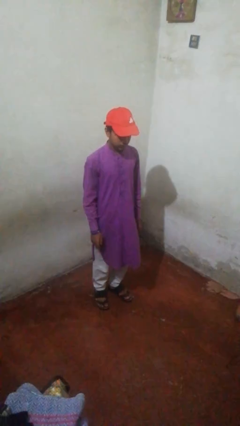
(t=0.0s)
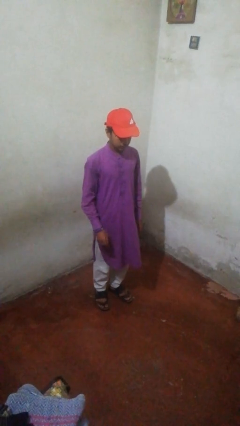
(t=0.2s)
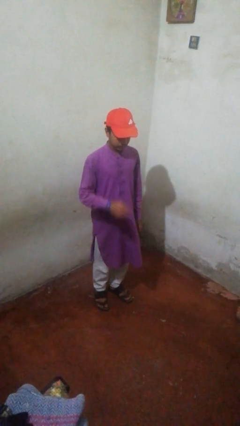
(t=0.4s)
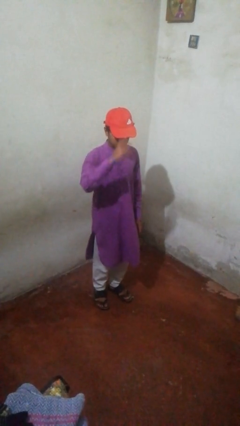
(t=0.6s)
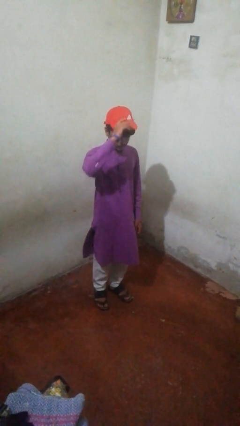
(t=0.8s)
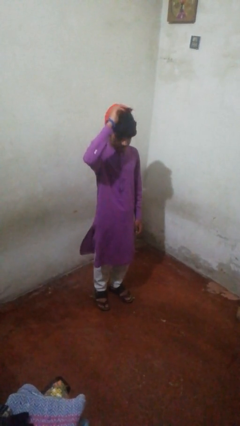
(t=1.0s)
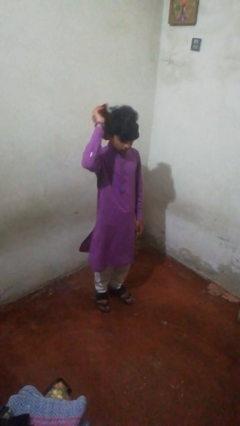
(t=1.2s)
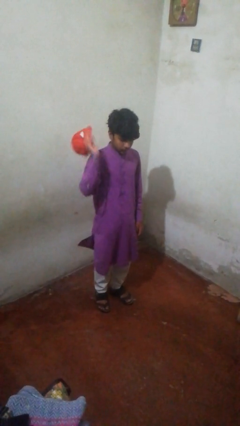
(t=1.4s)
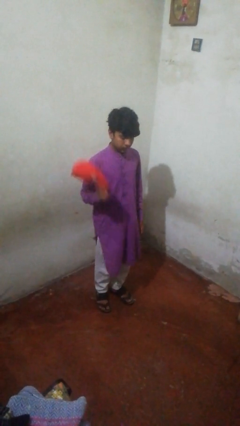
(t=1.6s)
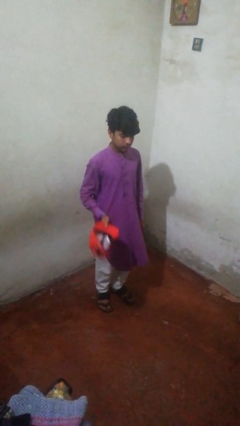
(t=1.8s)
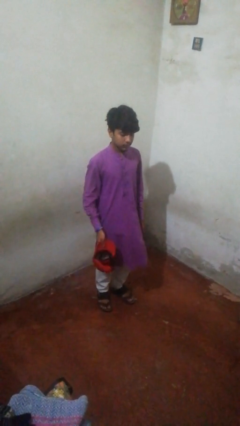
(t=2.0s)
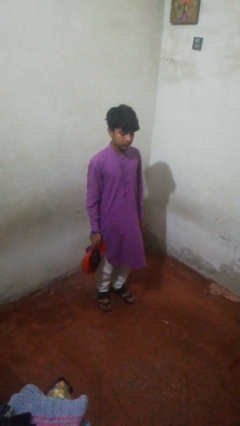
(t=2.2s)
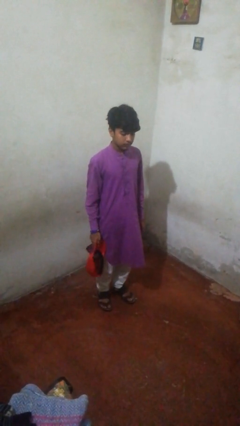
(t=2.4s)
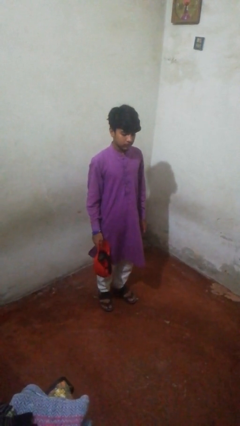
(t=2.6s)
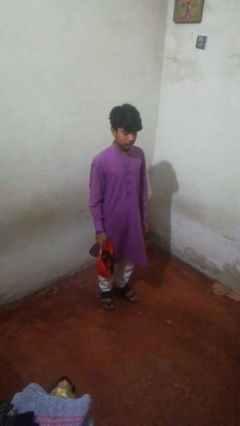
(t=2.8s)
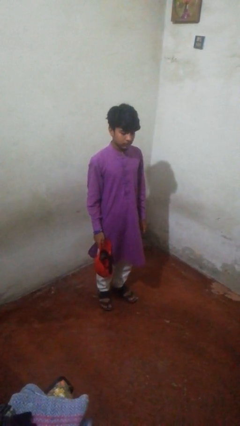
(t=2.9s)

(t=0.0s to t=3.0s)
person closes sliding door

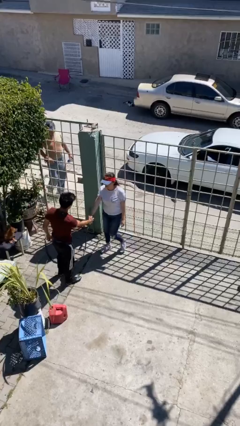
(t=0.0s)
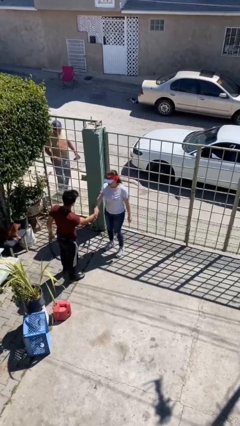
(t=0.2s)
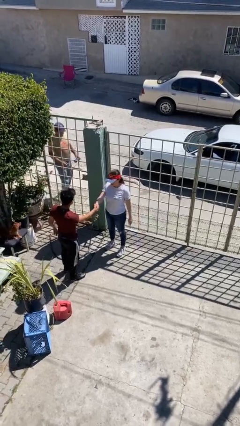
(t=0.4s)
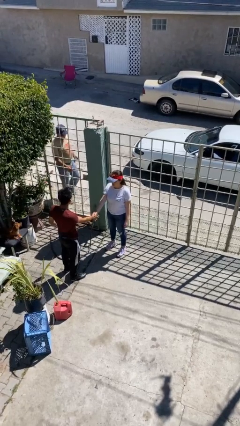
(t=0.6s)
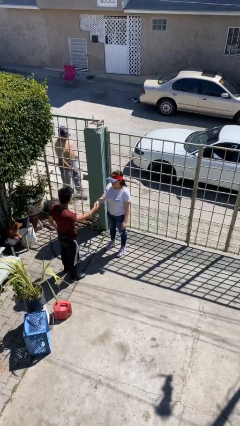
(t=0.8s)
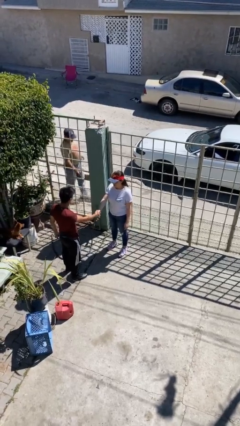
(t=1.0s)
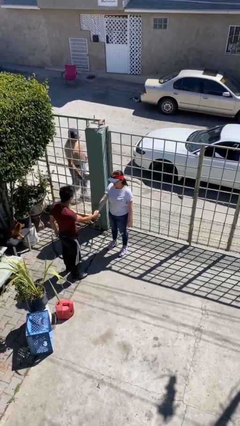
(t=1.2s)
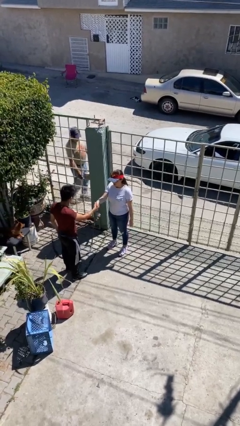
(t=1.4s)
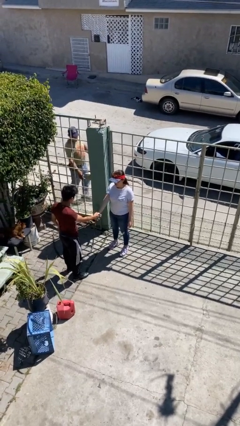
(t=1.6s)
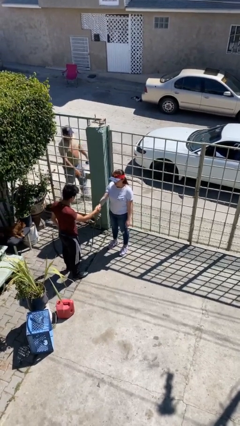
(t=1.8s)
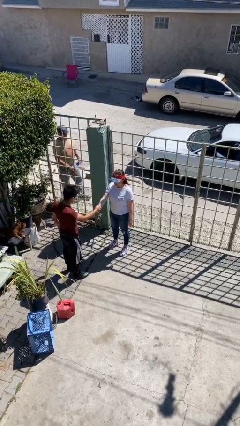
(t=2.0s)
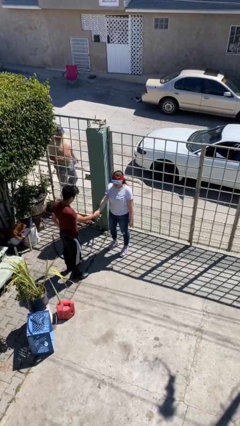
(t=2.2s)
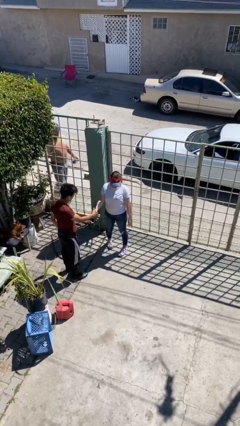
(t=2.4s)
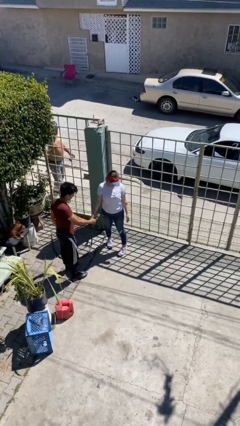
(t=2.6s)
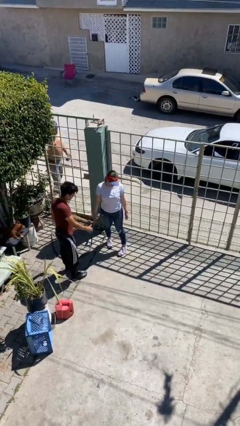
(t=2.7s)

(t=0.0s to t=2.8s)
person shakes hand

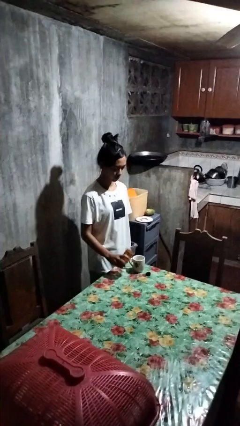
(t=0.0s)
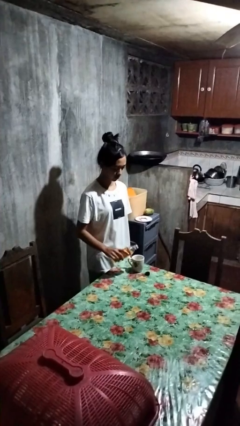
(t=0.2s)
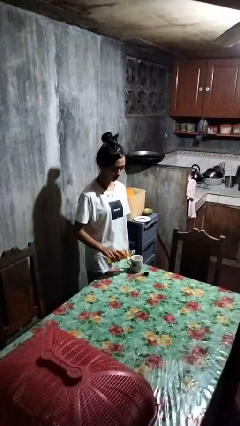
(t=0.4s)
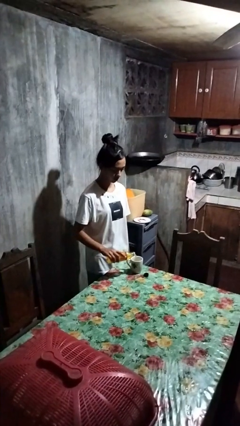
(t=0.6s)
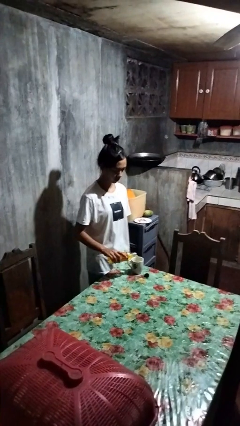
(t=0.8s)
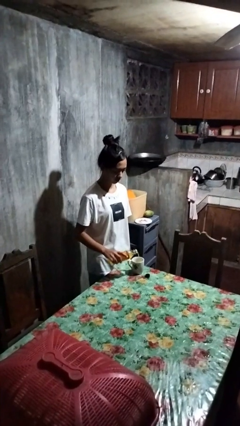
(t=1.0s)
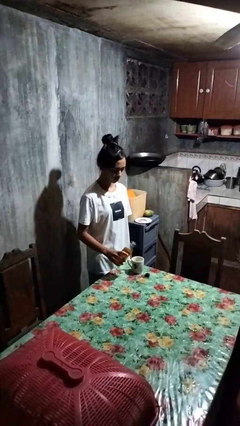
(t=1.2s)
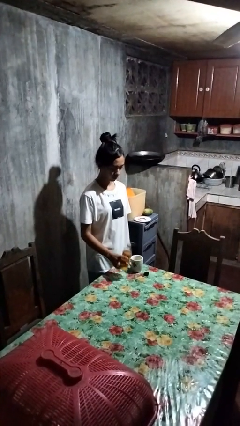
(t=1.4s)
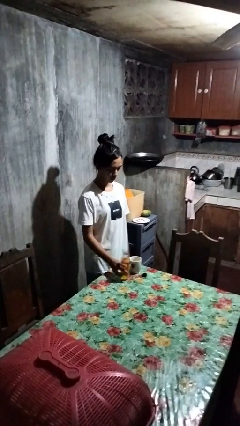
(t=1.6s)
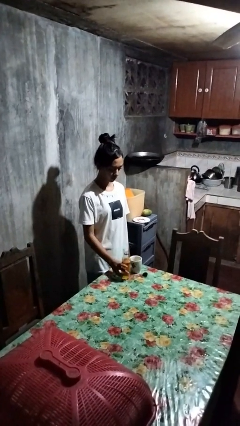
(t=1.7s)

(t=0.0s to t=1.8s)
person pours liquid into cup

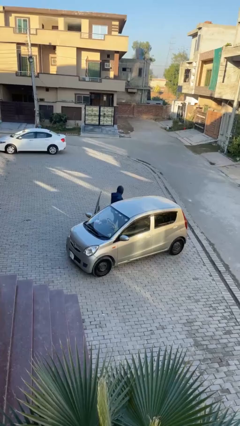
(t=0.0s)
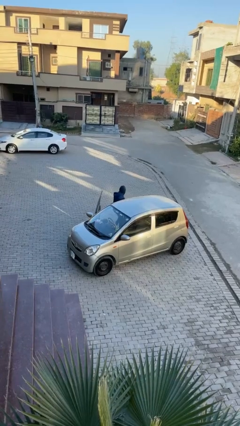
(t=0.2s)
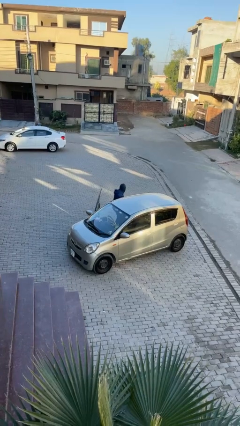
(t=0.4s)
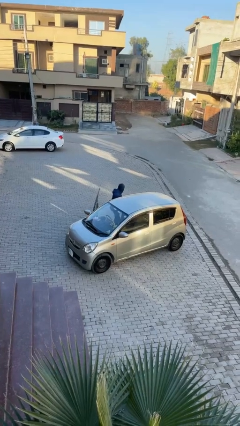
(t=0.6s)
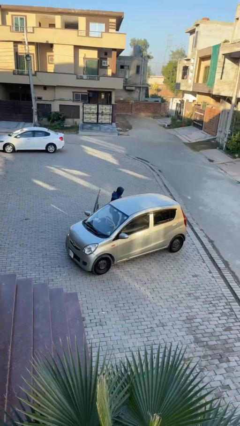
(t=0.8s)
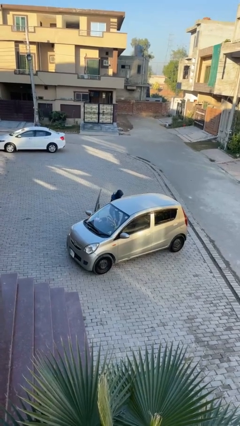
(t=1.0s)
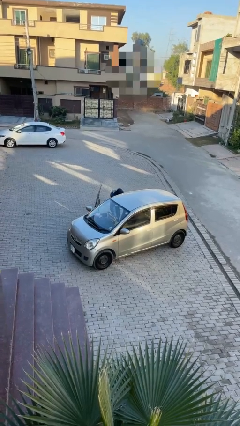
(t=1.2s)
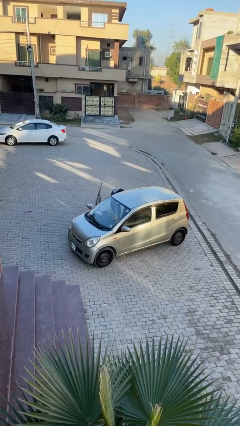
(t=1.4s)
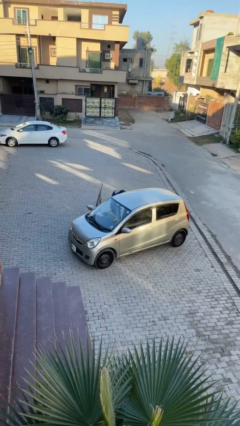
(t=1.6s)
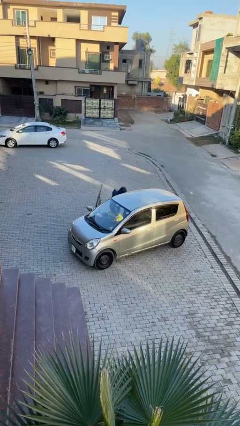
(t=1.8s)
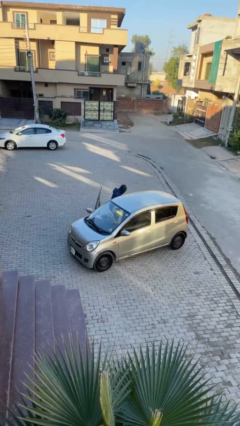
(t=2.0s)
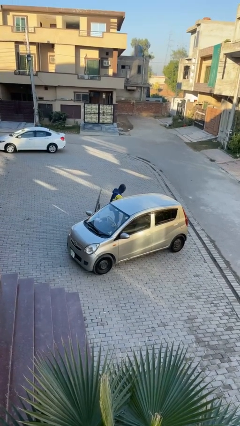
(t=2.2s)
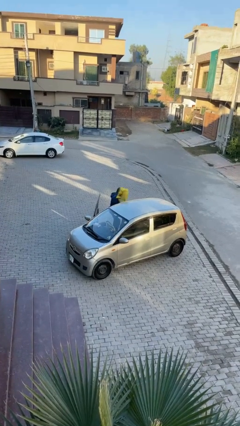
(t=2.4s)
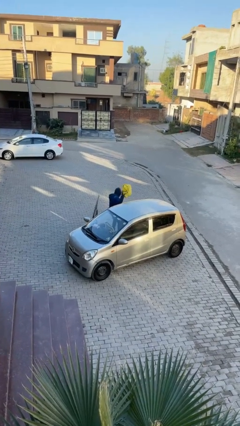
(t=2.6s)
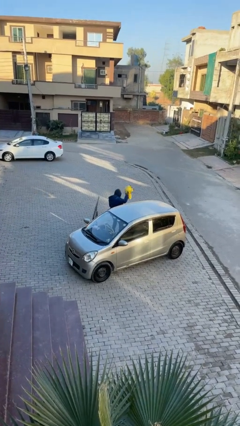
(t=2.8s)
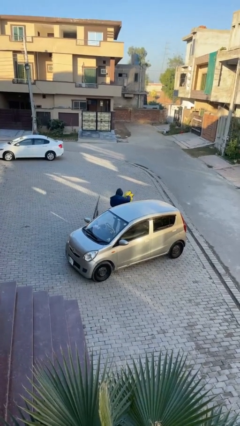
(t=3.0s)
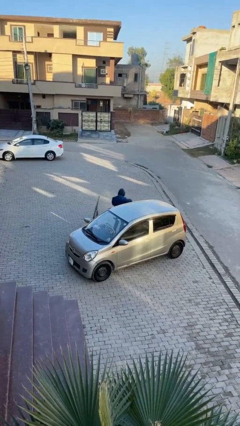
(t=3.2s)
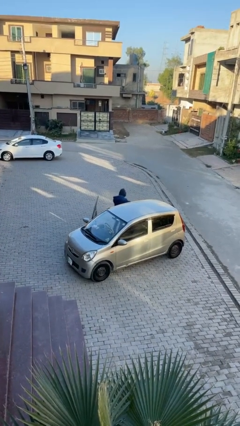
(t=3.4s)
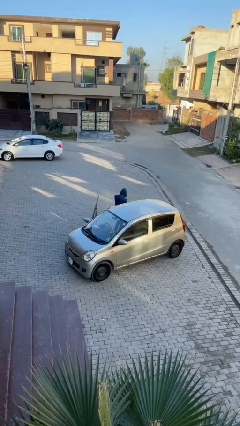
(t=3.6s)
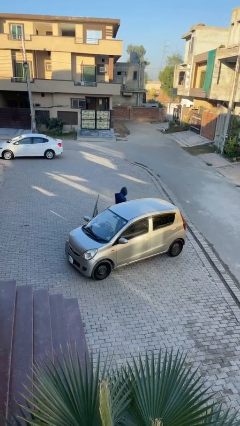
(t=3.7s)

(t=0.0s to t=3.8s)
person unloads car

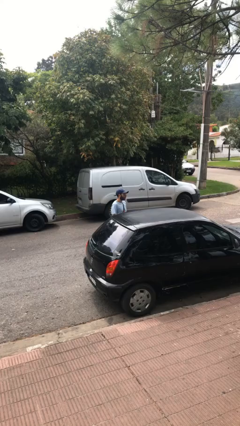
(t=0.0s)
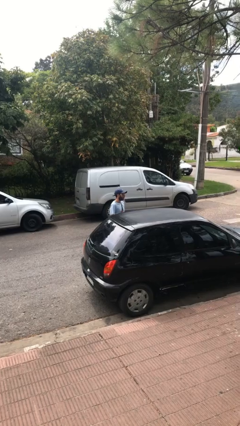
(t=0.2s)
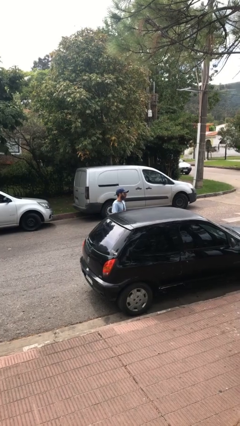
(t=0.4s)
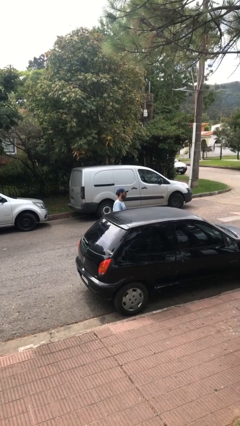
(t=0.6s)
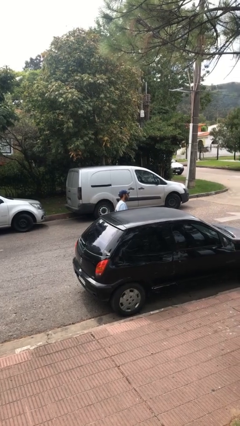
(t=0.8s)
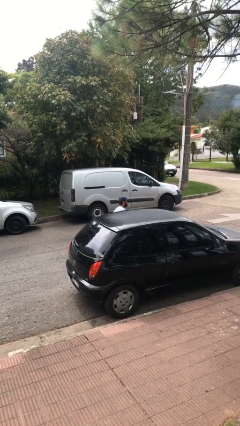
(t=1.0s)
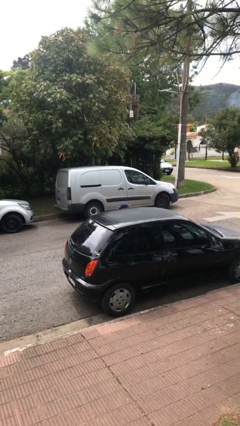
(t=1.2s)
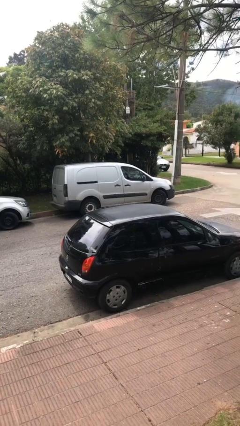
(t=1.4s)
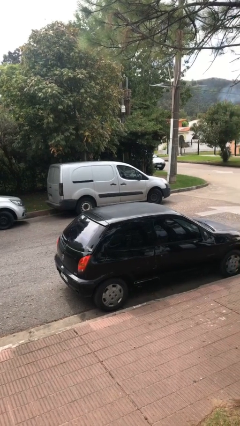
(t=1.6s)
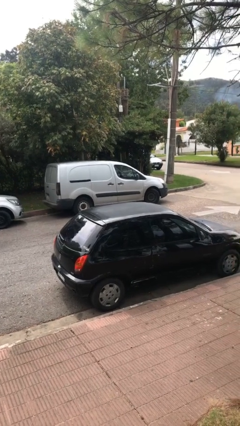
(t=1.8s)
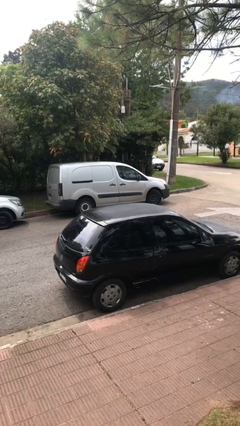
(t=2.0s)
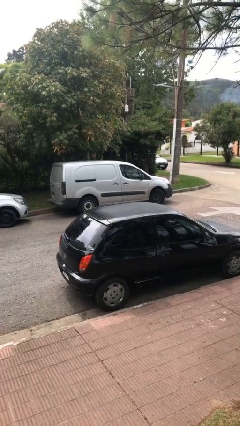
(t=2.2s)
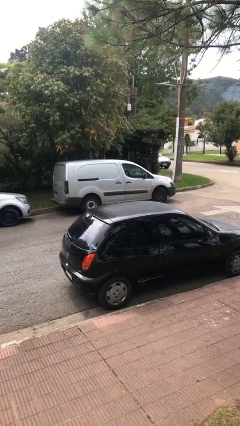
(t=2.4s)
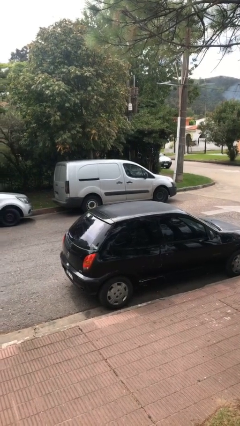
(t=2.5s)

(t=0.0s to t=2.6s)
person enters car

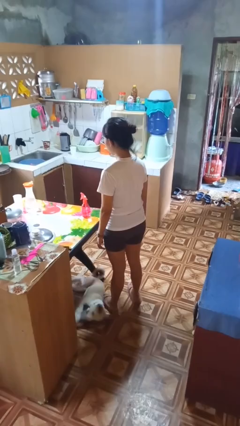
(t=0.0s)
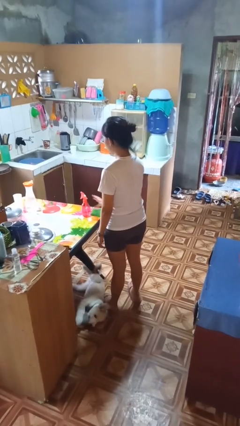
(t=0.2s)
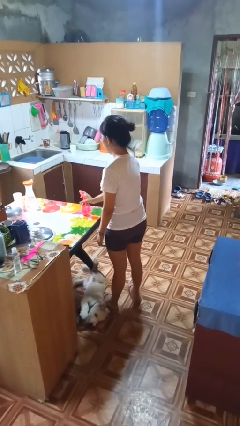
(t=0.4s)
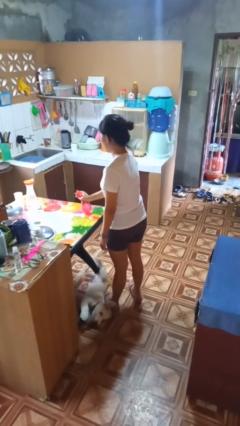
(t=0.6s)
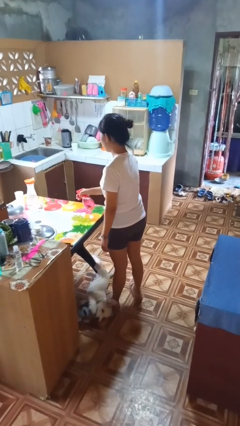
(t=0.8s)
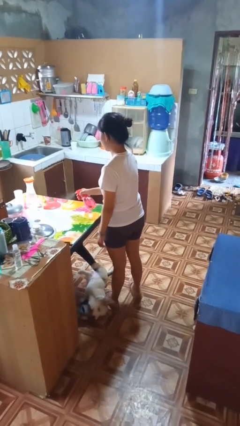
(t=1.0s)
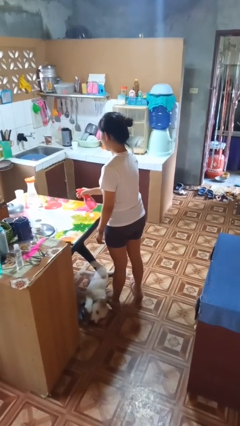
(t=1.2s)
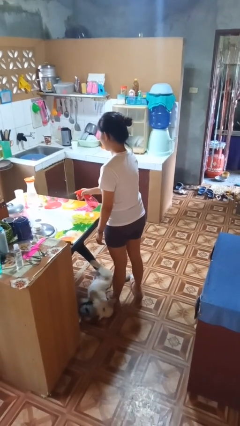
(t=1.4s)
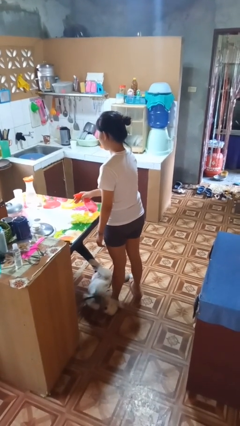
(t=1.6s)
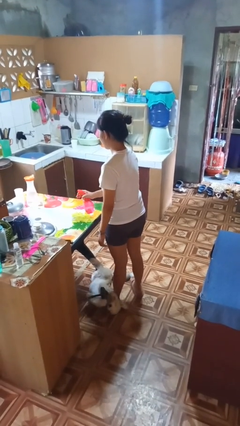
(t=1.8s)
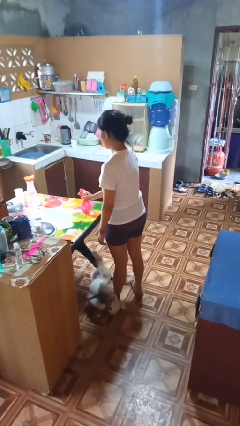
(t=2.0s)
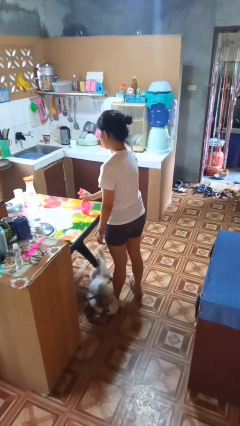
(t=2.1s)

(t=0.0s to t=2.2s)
person sprays from bottle

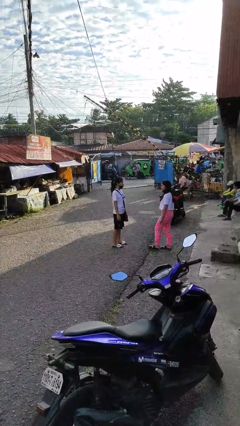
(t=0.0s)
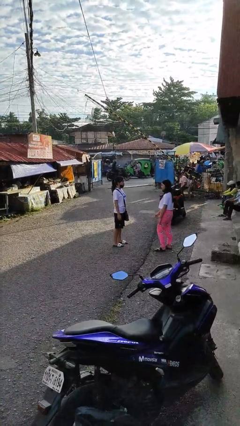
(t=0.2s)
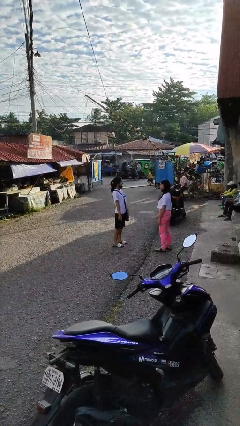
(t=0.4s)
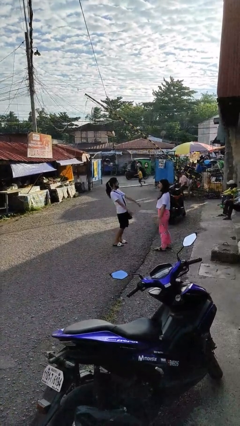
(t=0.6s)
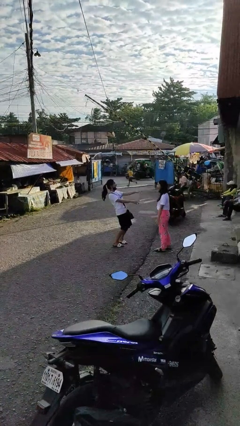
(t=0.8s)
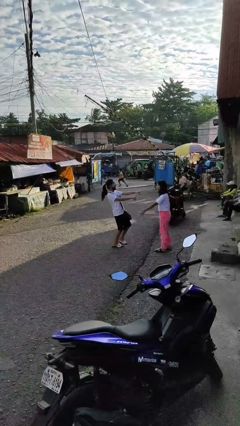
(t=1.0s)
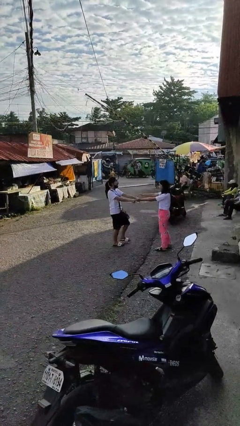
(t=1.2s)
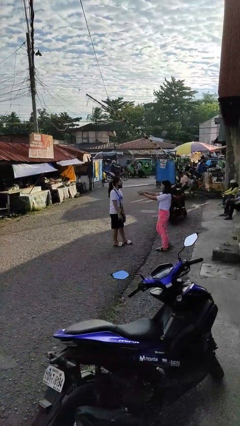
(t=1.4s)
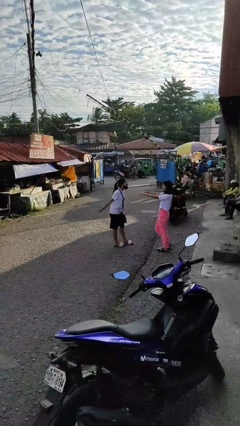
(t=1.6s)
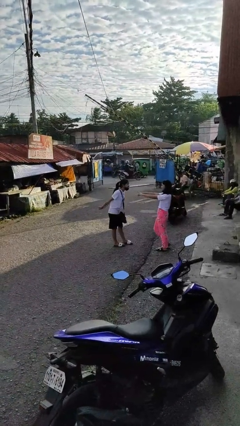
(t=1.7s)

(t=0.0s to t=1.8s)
person laughs with person
